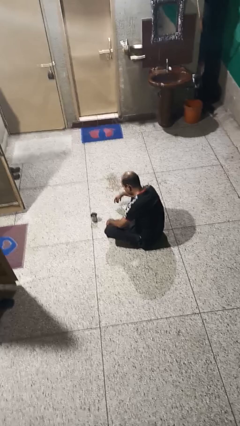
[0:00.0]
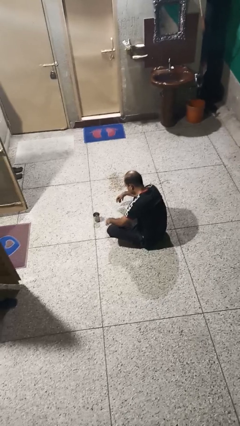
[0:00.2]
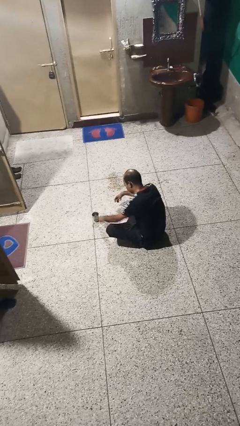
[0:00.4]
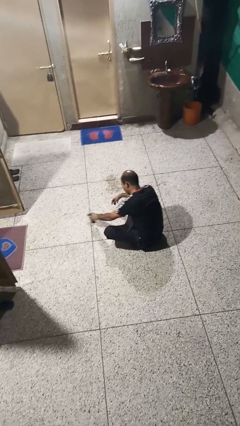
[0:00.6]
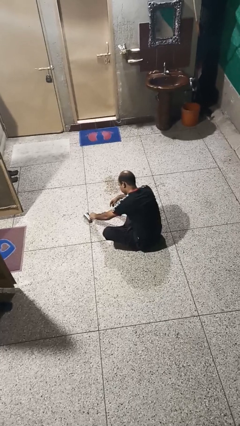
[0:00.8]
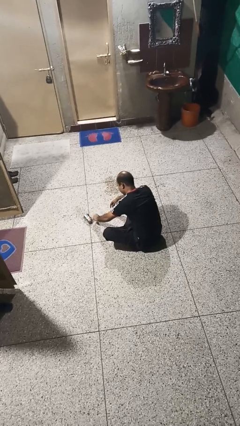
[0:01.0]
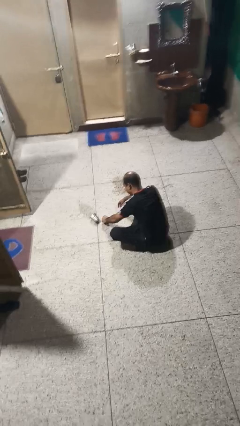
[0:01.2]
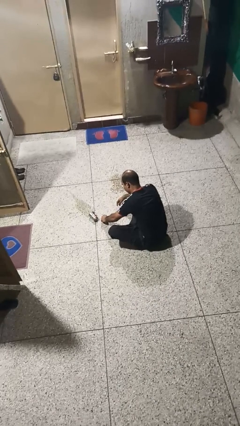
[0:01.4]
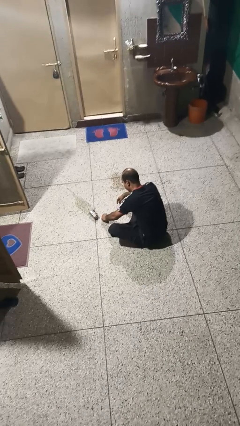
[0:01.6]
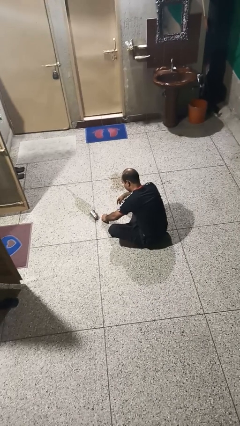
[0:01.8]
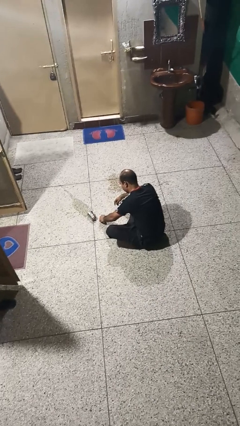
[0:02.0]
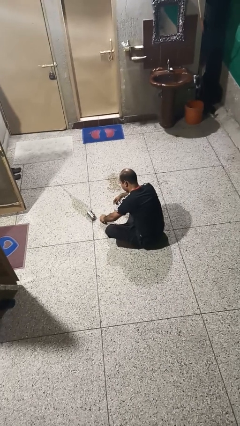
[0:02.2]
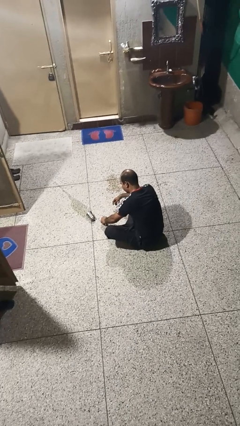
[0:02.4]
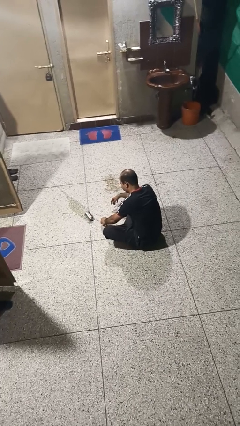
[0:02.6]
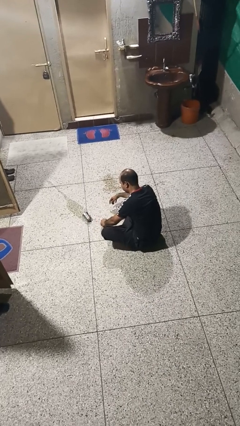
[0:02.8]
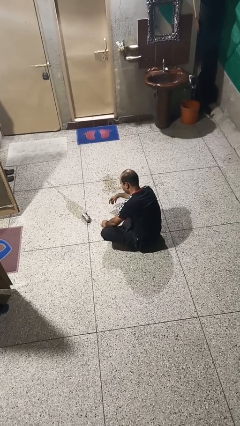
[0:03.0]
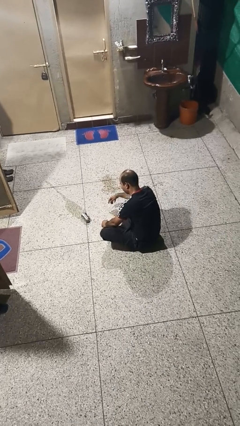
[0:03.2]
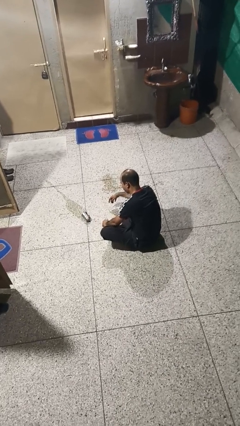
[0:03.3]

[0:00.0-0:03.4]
person spills on floor

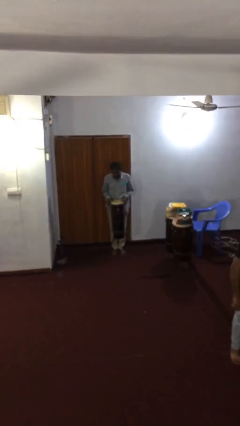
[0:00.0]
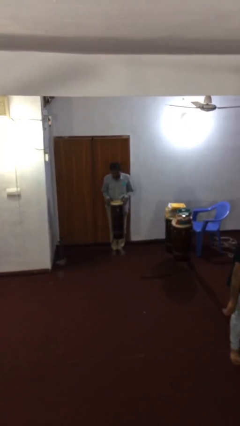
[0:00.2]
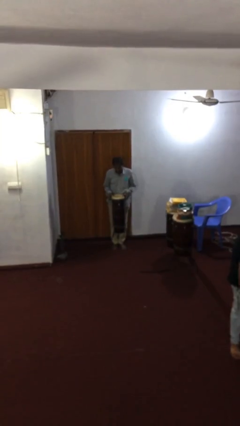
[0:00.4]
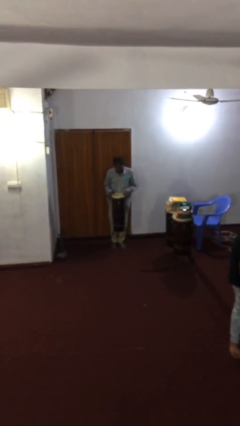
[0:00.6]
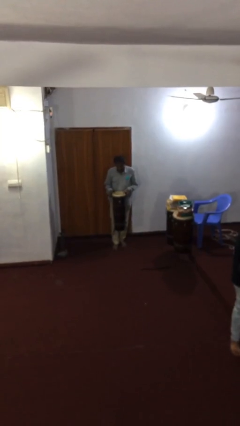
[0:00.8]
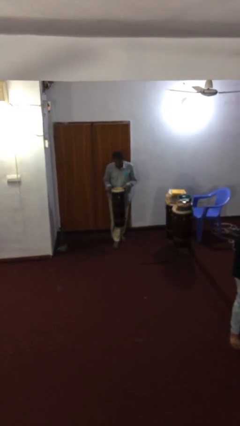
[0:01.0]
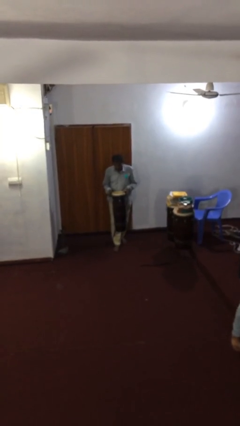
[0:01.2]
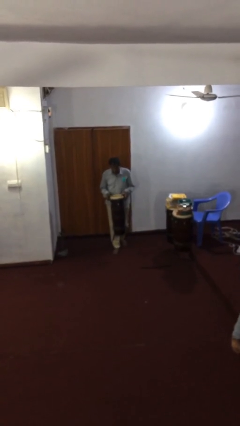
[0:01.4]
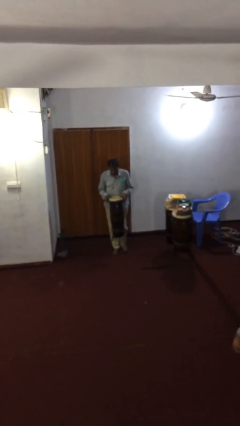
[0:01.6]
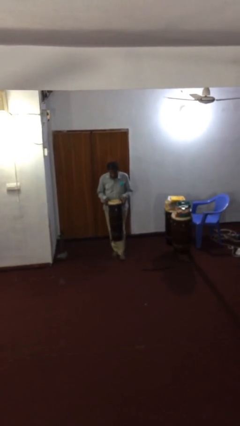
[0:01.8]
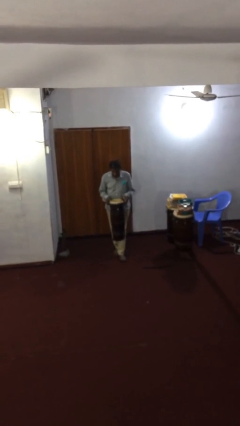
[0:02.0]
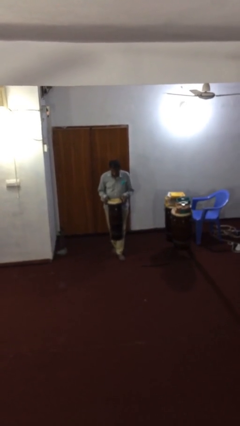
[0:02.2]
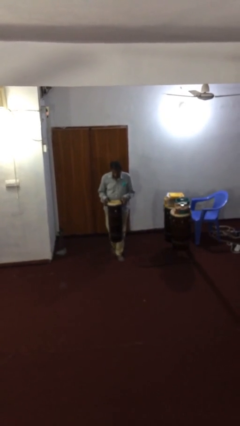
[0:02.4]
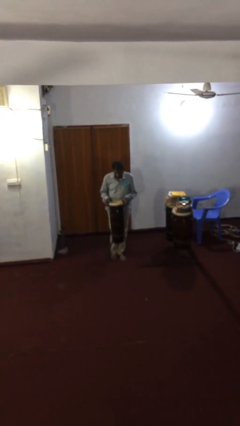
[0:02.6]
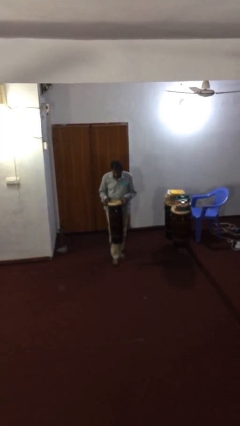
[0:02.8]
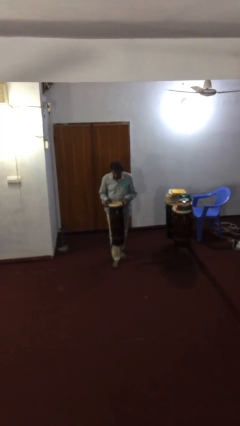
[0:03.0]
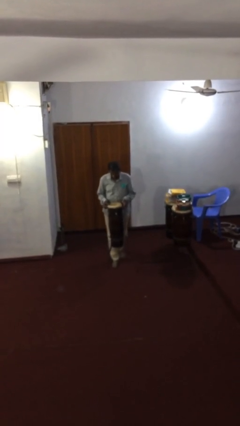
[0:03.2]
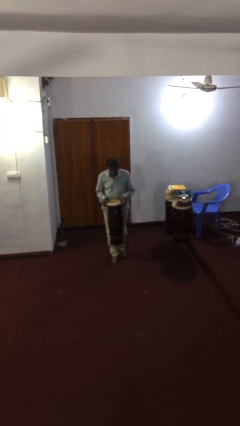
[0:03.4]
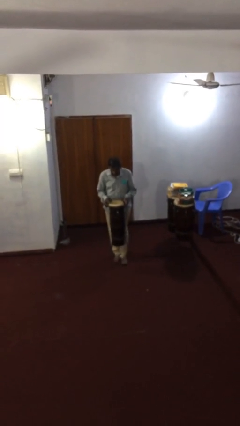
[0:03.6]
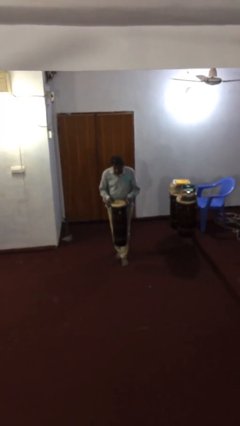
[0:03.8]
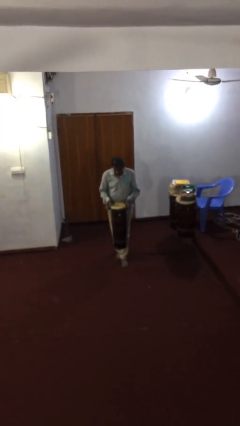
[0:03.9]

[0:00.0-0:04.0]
person carries heavy object

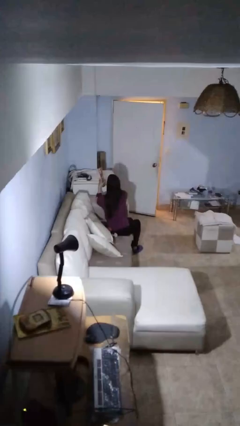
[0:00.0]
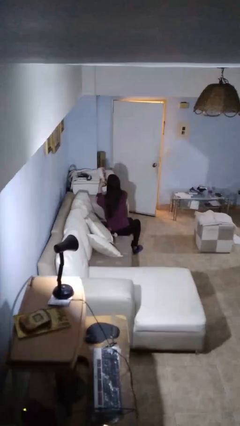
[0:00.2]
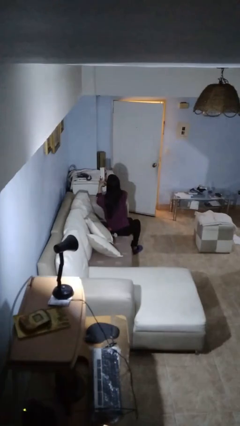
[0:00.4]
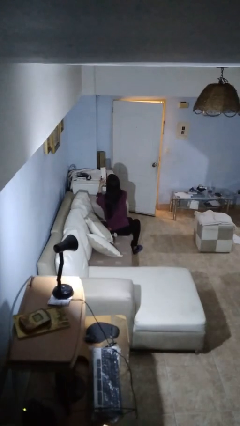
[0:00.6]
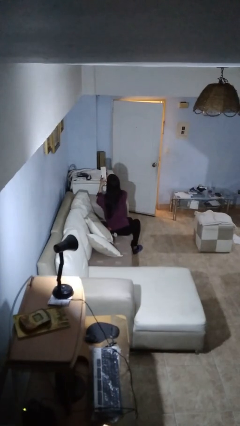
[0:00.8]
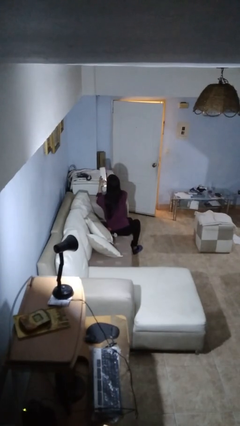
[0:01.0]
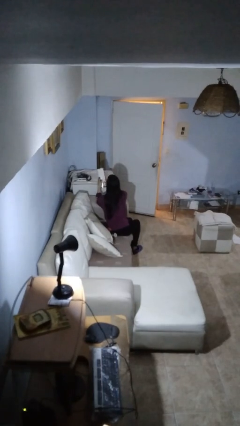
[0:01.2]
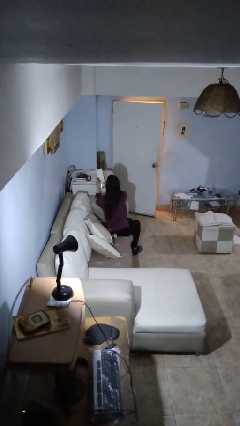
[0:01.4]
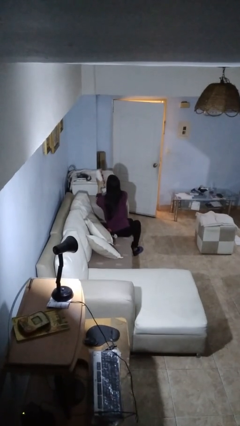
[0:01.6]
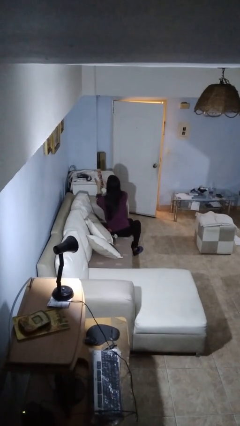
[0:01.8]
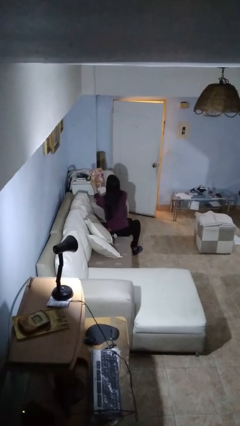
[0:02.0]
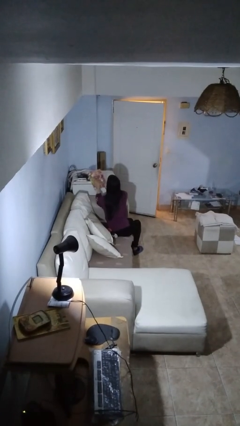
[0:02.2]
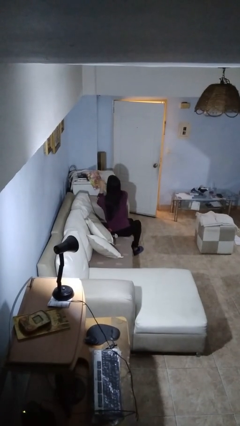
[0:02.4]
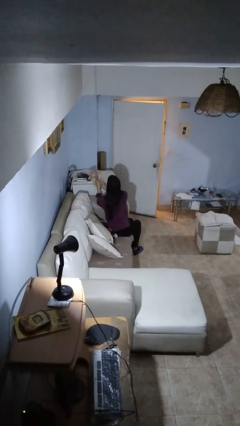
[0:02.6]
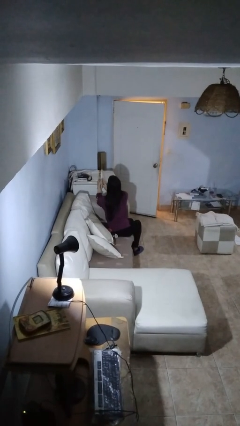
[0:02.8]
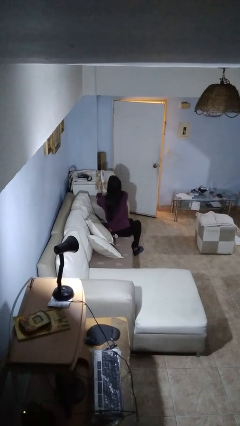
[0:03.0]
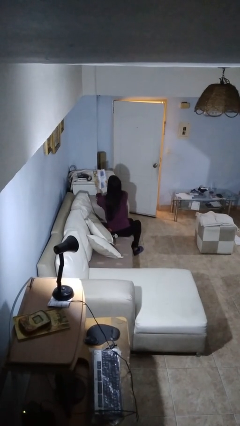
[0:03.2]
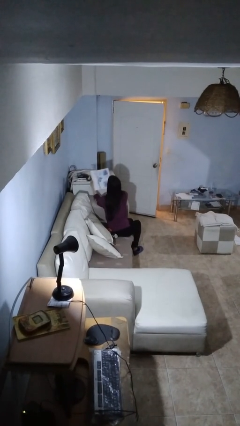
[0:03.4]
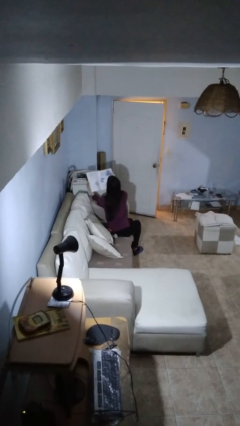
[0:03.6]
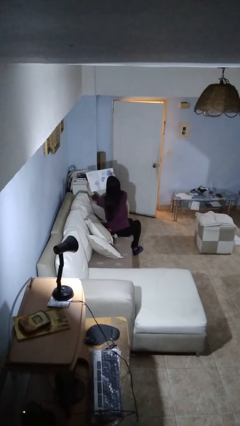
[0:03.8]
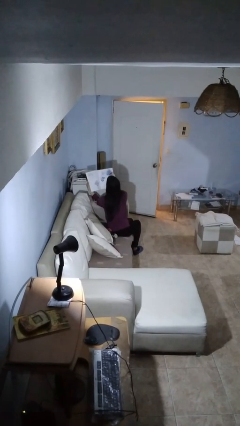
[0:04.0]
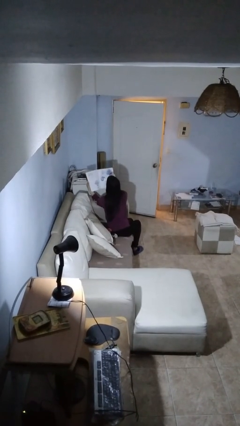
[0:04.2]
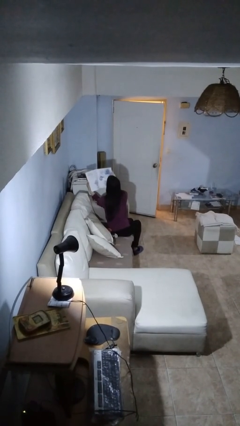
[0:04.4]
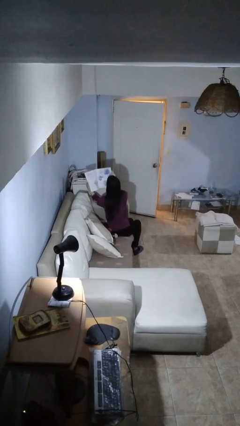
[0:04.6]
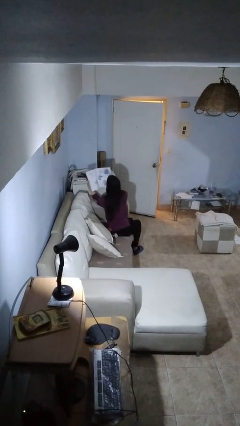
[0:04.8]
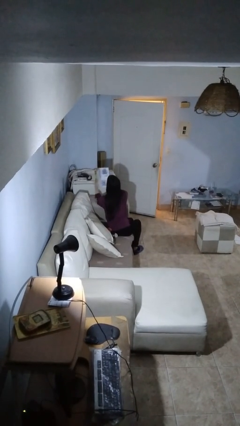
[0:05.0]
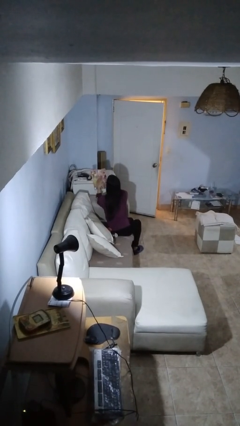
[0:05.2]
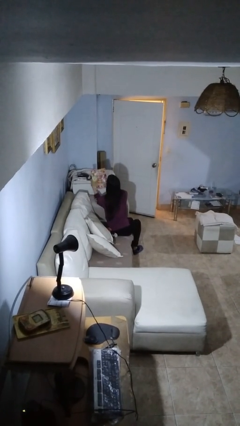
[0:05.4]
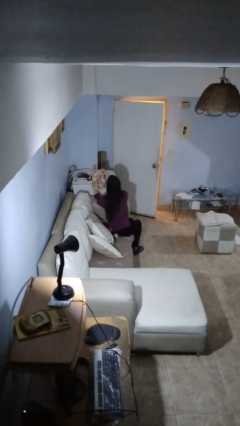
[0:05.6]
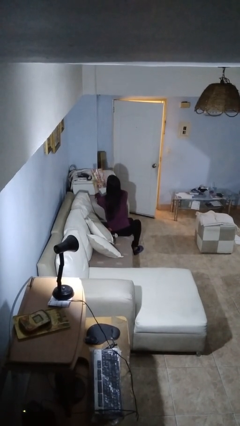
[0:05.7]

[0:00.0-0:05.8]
person reads magazine

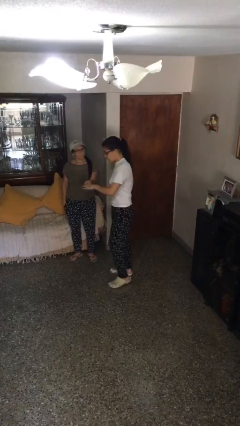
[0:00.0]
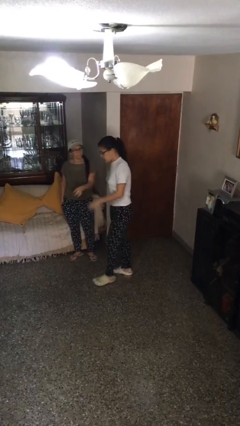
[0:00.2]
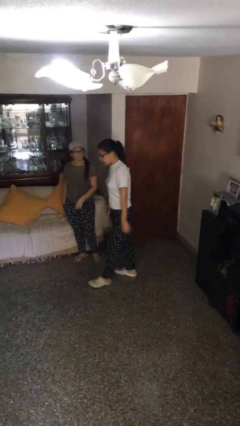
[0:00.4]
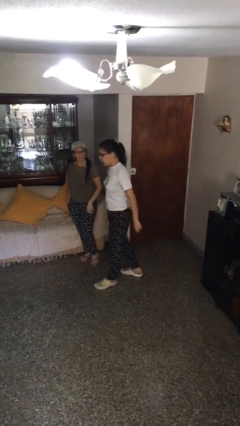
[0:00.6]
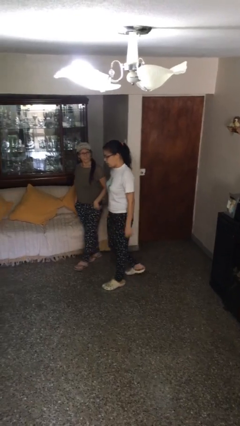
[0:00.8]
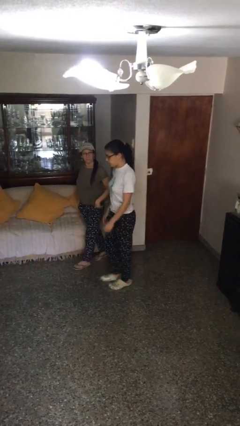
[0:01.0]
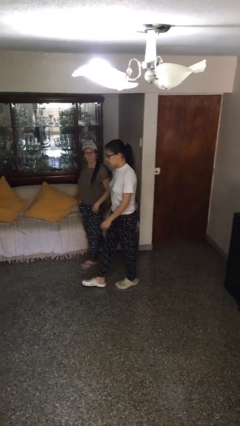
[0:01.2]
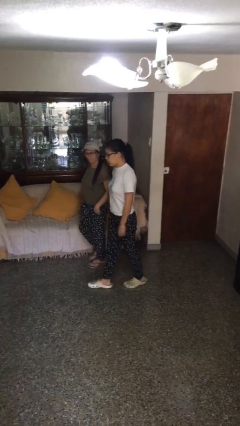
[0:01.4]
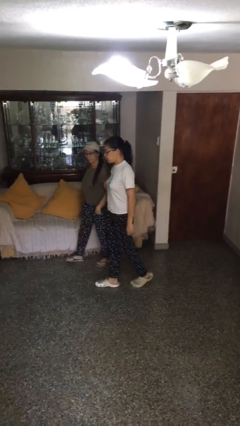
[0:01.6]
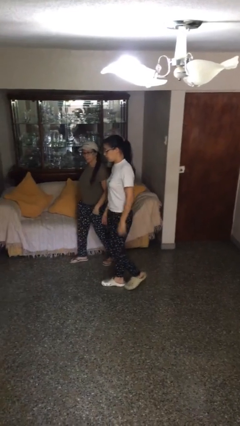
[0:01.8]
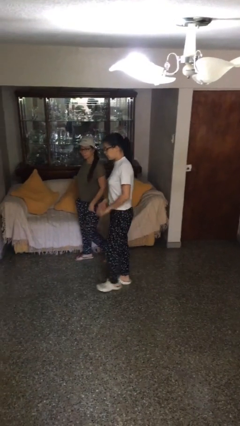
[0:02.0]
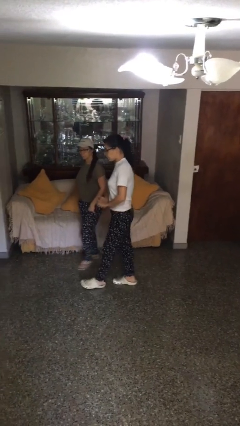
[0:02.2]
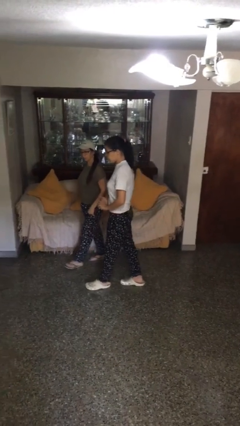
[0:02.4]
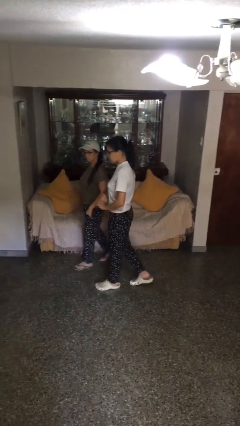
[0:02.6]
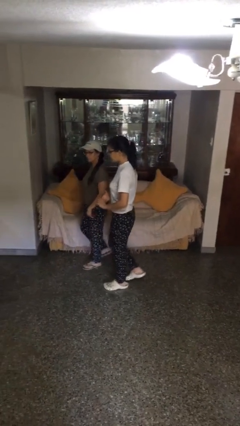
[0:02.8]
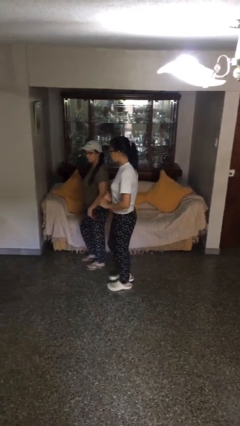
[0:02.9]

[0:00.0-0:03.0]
person talks to person

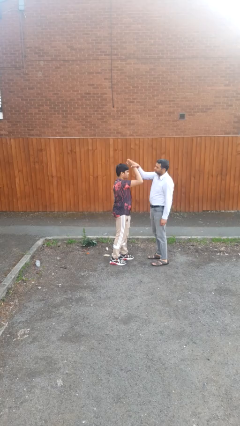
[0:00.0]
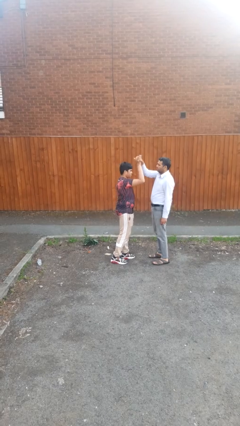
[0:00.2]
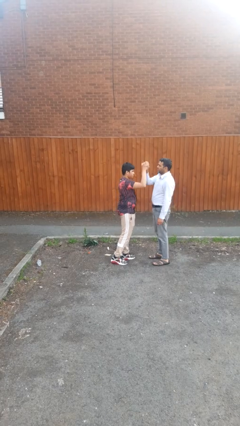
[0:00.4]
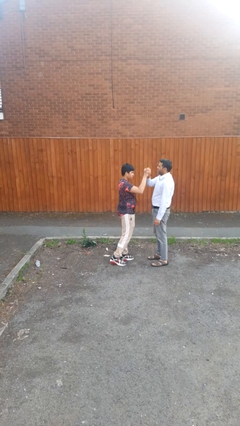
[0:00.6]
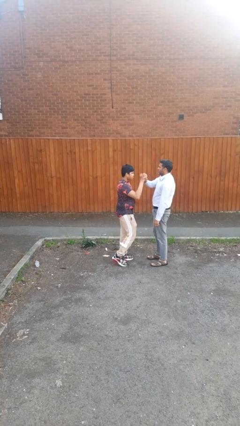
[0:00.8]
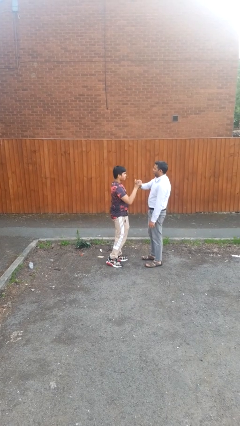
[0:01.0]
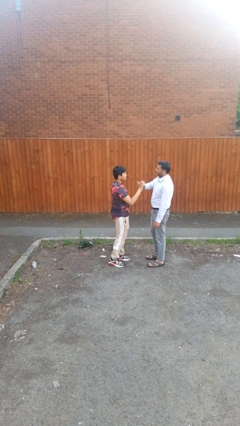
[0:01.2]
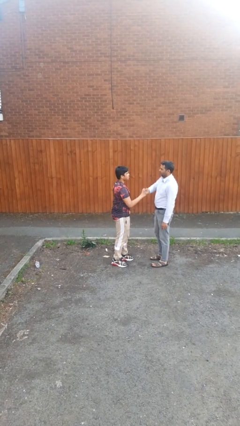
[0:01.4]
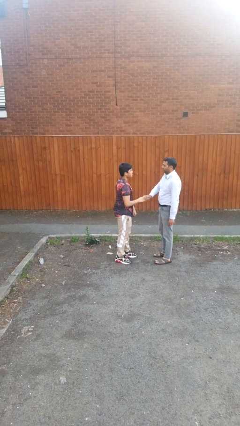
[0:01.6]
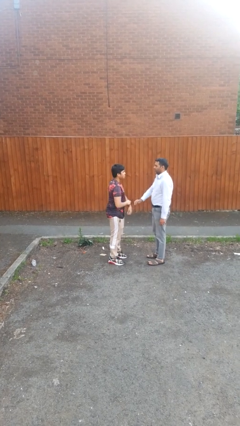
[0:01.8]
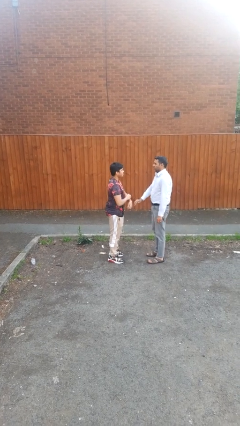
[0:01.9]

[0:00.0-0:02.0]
person highfives hand
